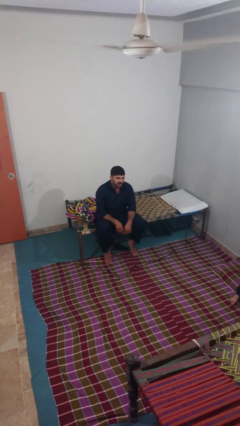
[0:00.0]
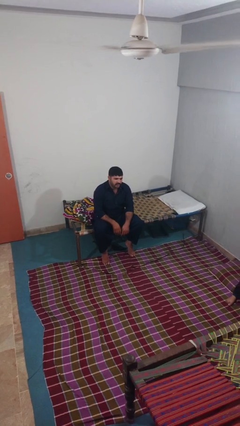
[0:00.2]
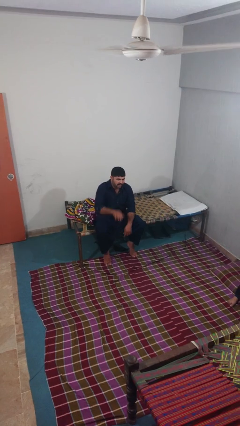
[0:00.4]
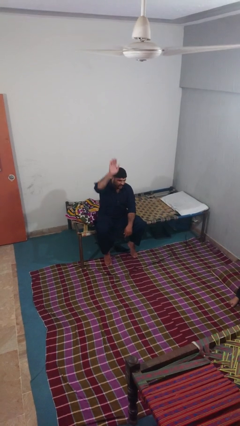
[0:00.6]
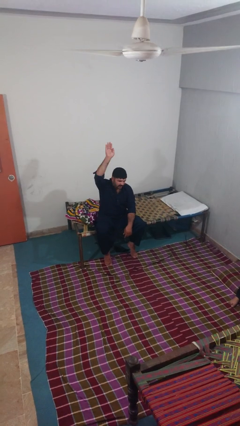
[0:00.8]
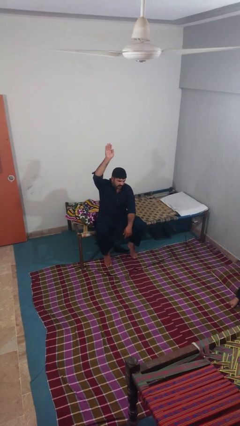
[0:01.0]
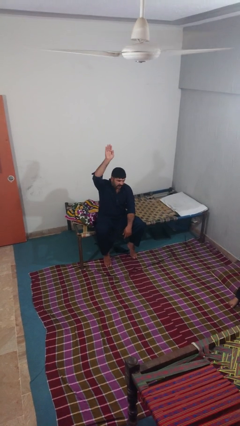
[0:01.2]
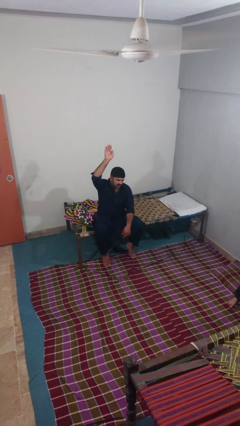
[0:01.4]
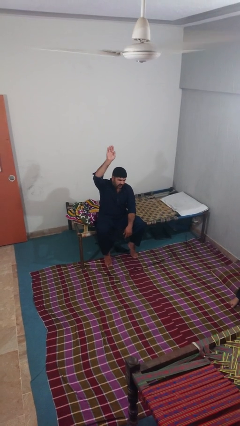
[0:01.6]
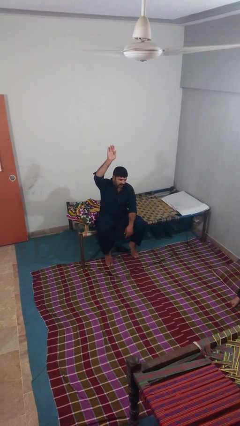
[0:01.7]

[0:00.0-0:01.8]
person gestures raise hand

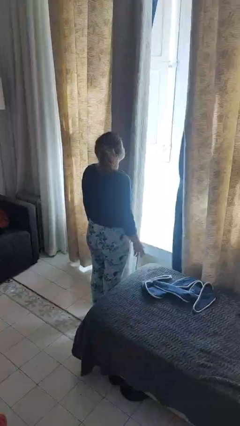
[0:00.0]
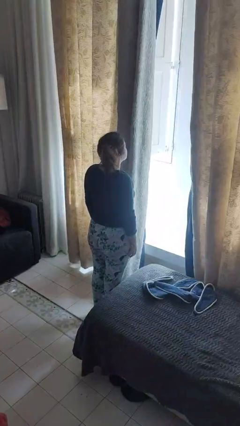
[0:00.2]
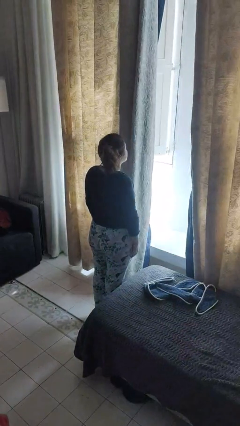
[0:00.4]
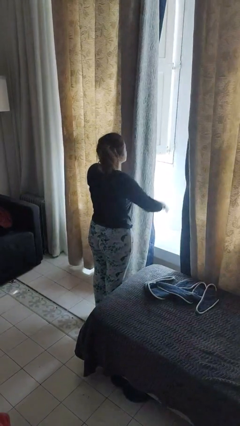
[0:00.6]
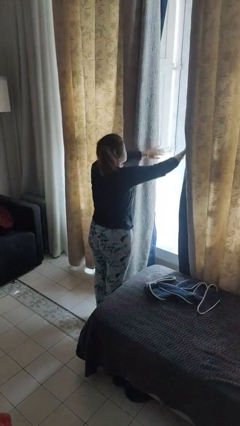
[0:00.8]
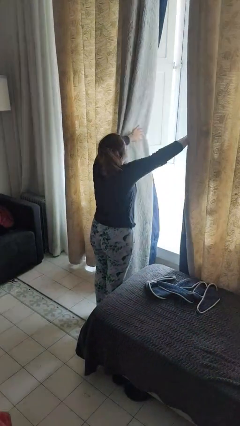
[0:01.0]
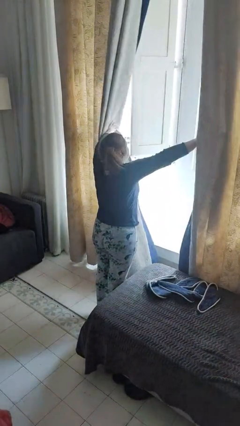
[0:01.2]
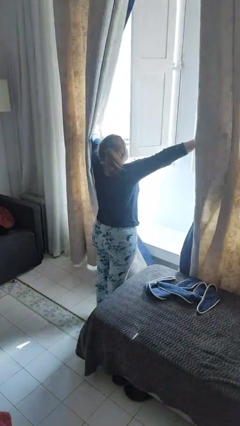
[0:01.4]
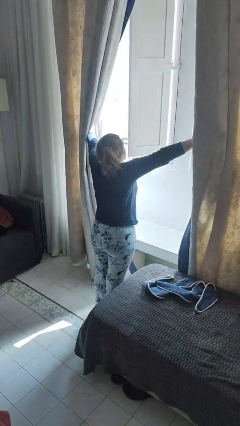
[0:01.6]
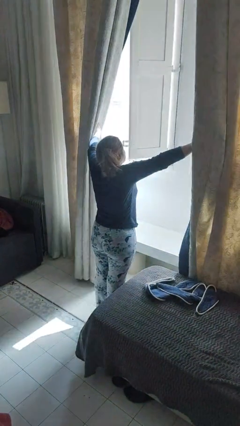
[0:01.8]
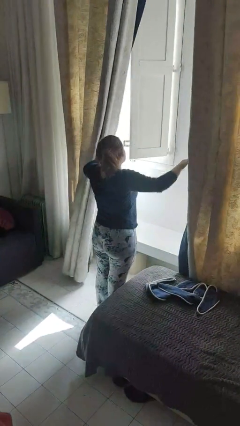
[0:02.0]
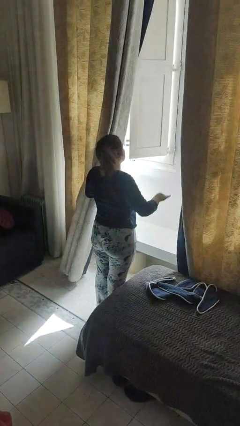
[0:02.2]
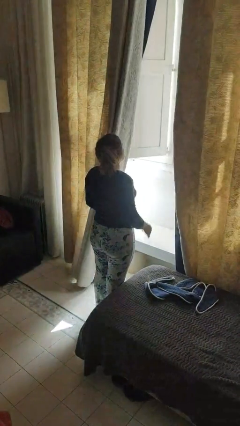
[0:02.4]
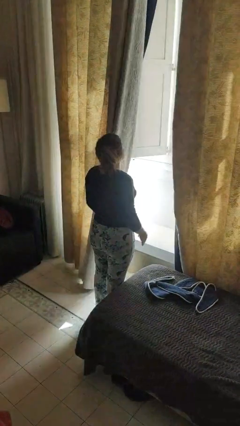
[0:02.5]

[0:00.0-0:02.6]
person opens curtains

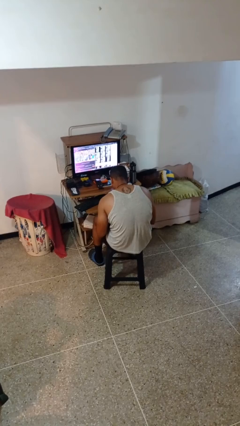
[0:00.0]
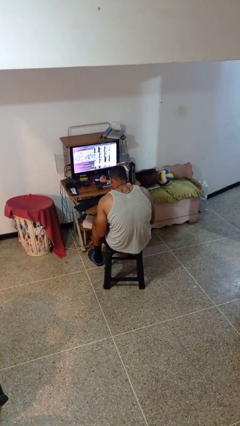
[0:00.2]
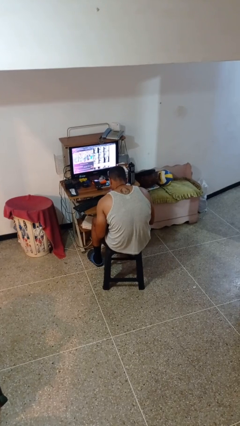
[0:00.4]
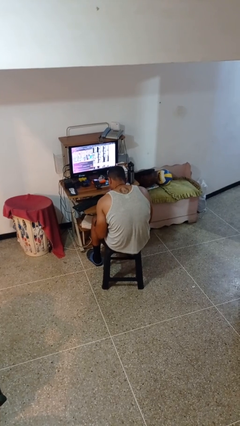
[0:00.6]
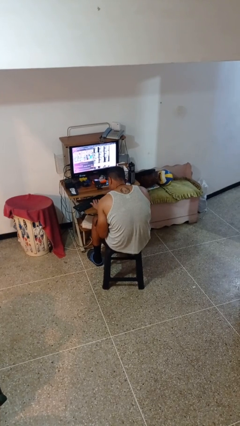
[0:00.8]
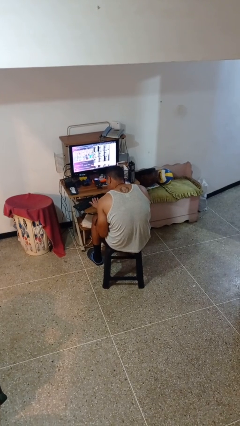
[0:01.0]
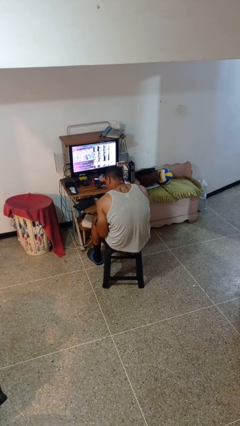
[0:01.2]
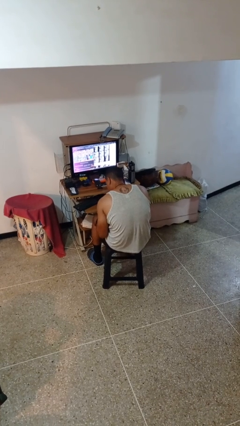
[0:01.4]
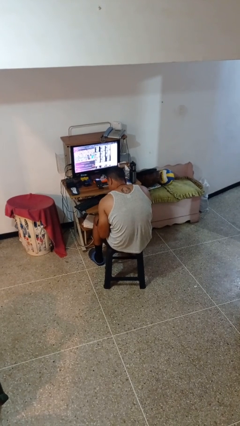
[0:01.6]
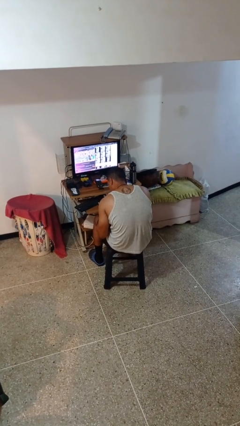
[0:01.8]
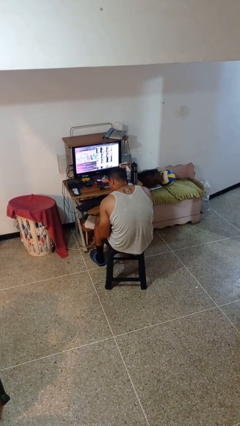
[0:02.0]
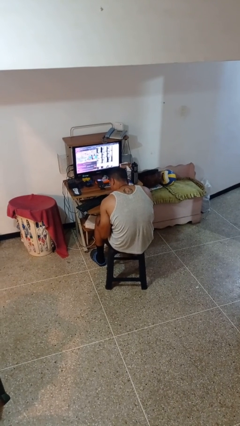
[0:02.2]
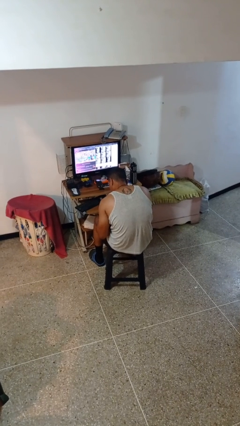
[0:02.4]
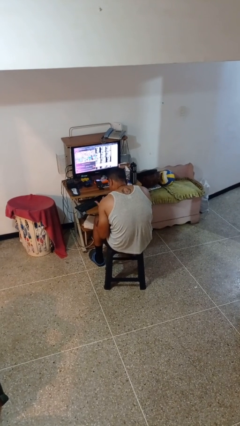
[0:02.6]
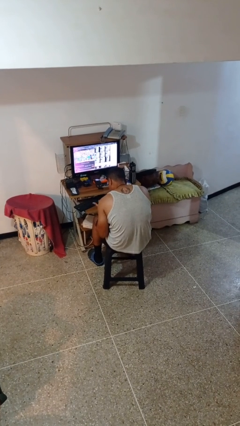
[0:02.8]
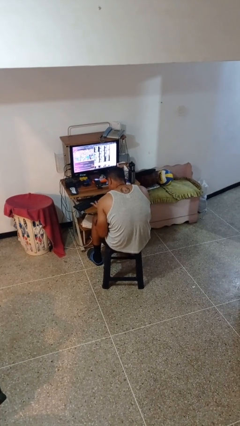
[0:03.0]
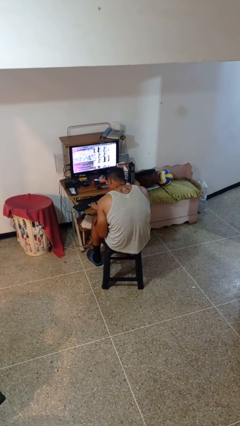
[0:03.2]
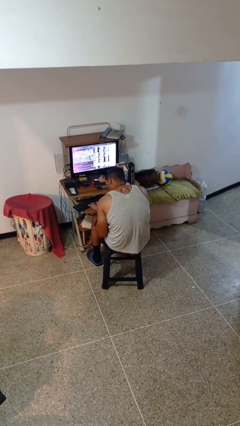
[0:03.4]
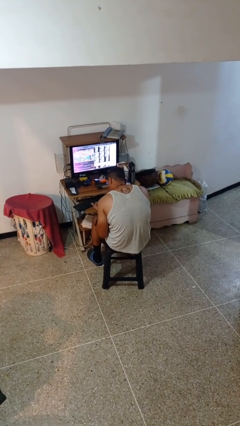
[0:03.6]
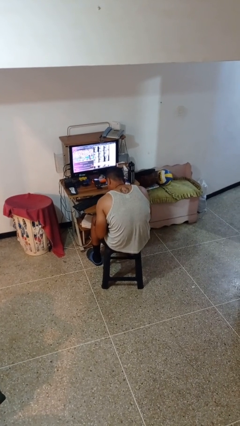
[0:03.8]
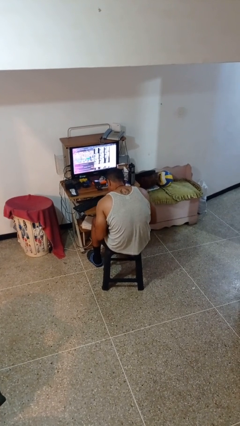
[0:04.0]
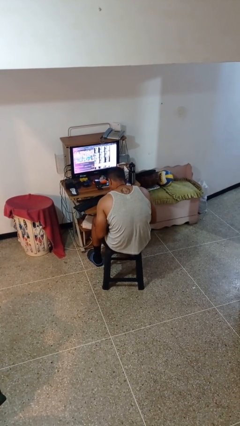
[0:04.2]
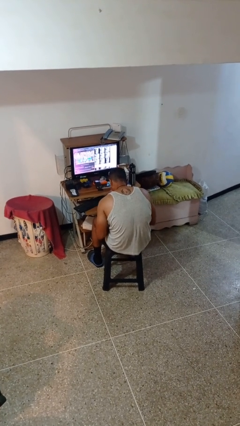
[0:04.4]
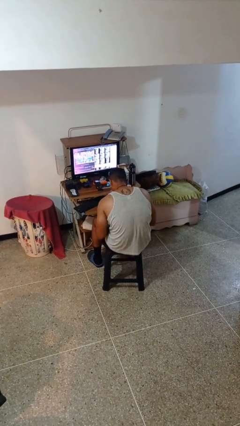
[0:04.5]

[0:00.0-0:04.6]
person looks at hands in lap

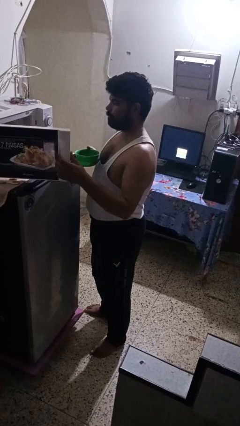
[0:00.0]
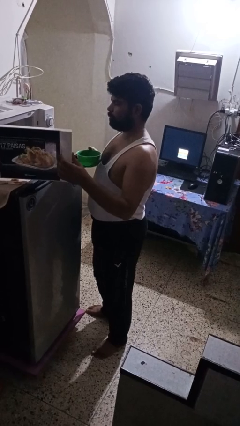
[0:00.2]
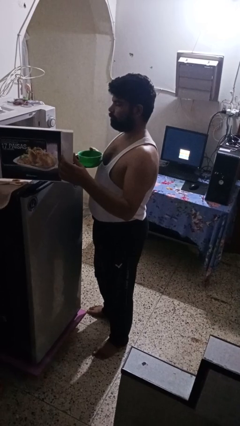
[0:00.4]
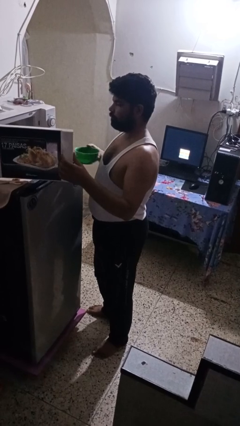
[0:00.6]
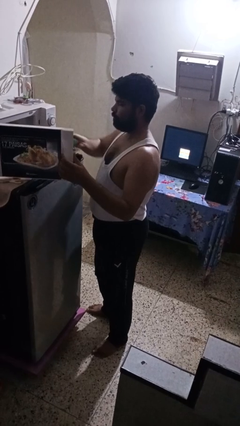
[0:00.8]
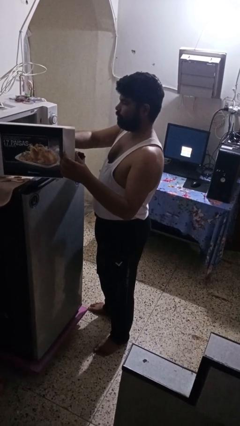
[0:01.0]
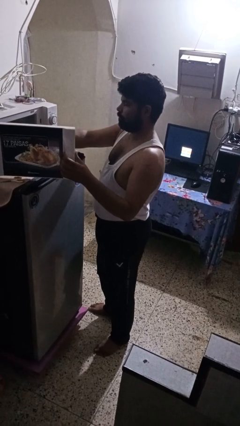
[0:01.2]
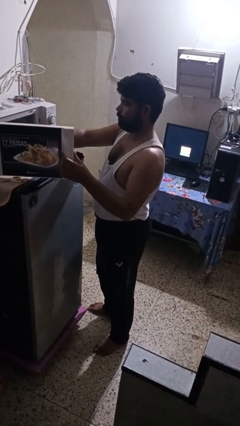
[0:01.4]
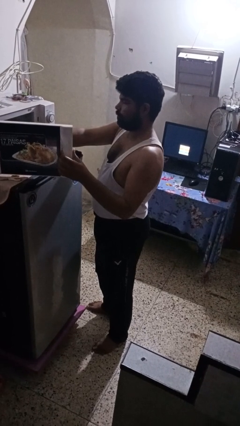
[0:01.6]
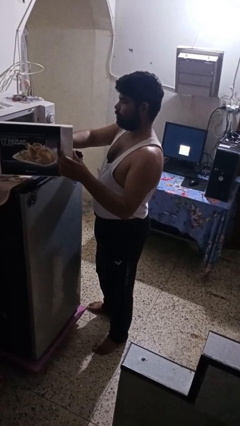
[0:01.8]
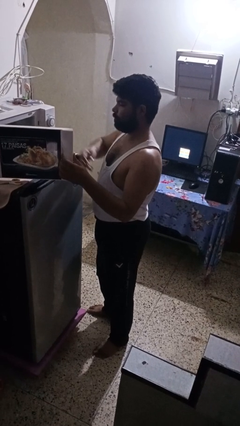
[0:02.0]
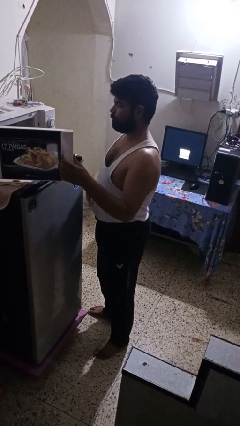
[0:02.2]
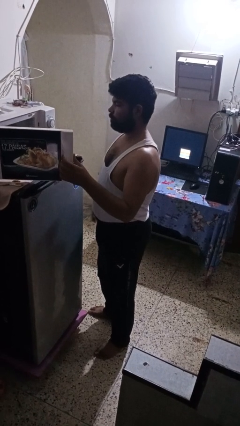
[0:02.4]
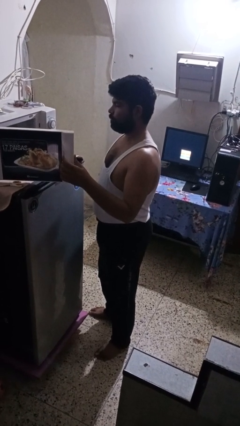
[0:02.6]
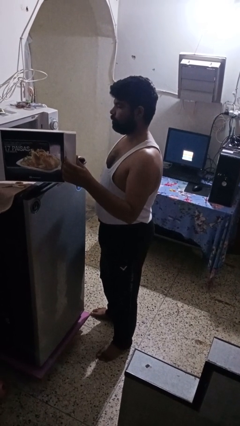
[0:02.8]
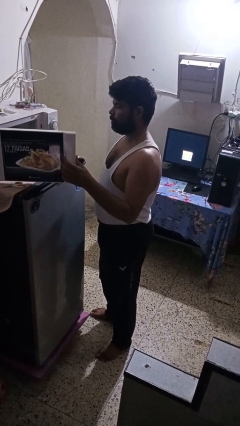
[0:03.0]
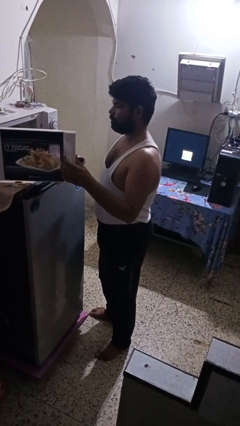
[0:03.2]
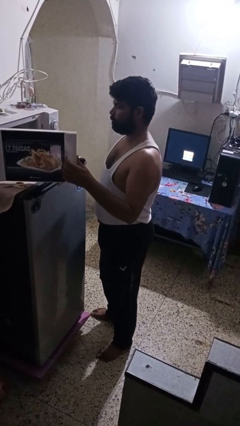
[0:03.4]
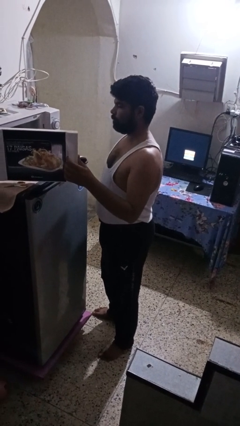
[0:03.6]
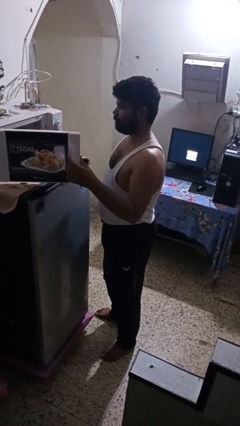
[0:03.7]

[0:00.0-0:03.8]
person puts object into microwave

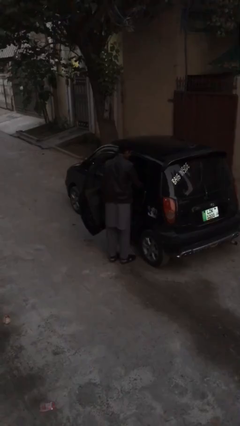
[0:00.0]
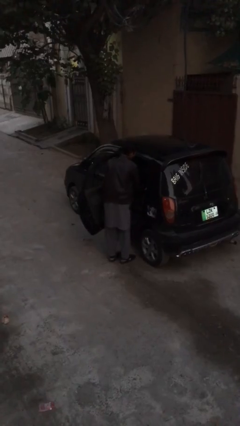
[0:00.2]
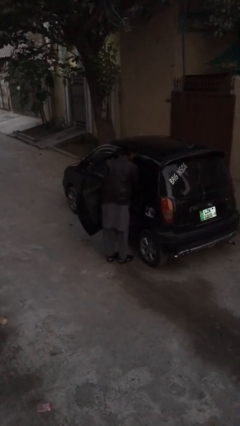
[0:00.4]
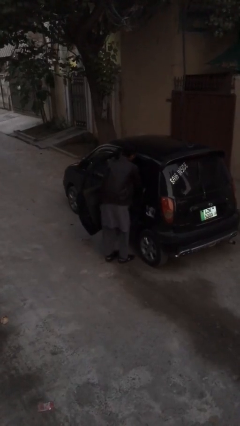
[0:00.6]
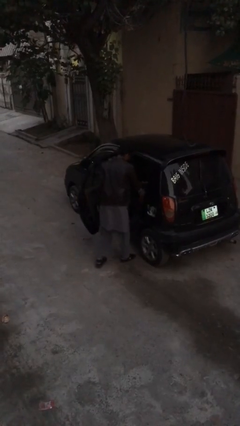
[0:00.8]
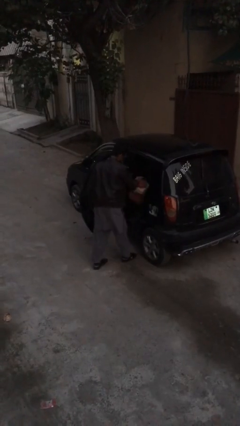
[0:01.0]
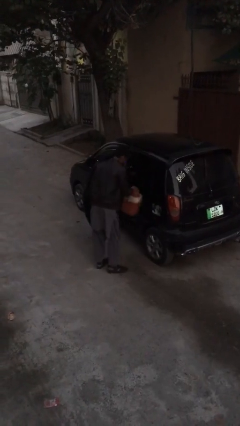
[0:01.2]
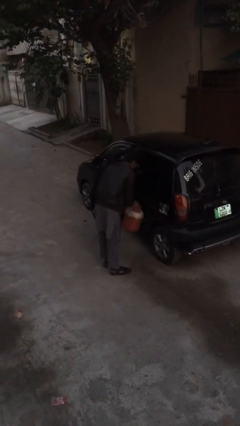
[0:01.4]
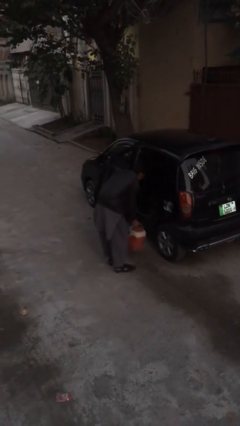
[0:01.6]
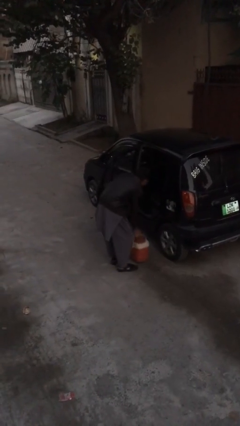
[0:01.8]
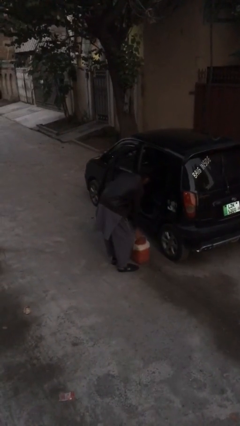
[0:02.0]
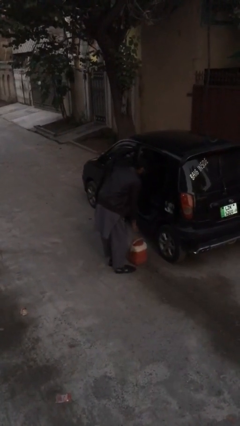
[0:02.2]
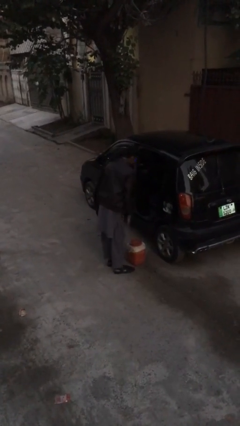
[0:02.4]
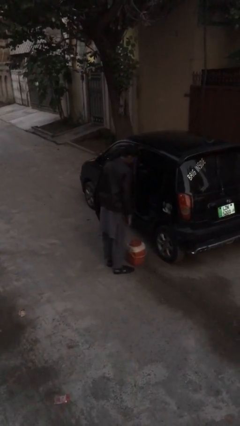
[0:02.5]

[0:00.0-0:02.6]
person unloads car

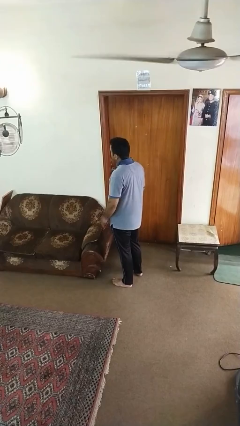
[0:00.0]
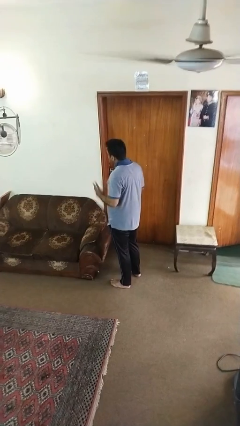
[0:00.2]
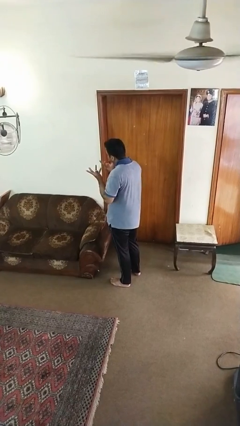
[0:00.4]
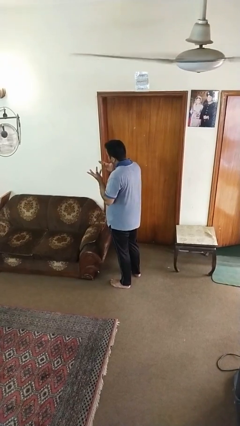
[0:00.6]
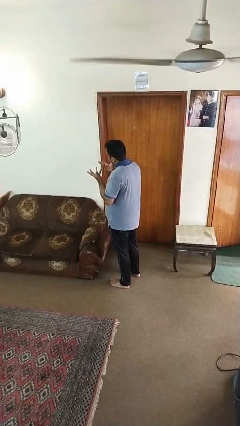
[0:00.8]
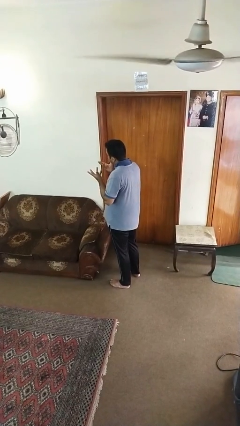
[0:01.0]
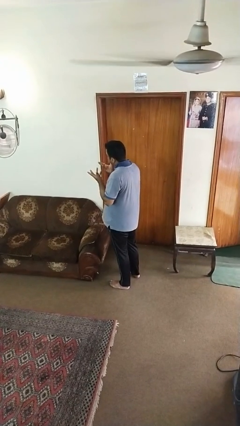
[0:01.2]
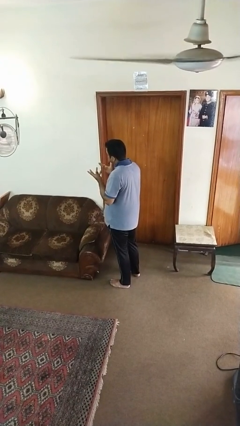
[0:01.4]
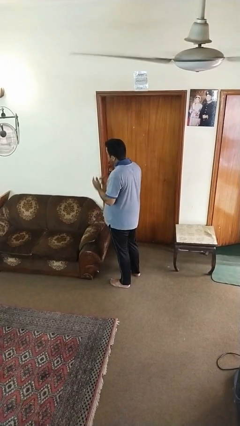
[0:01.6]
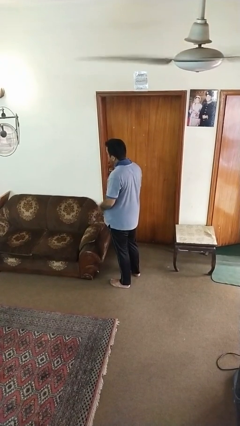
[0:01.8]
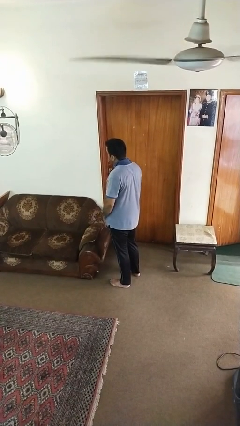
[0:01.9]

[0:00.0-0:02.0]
person shrugs

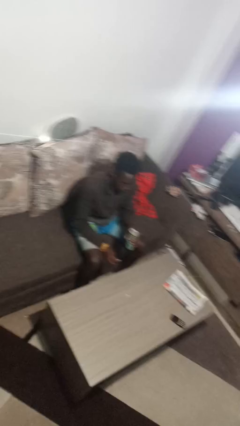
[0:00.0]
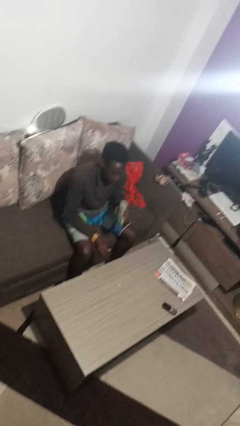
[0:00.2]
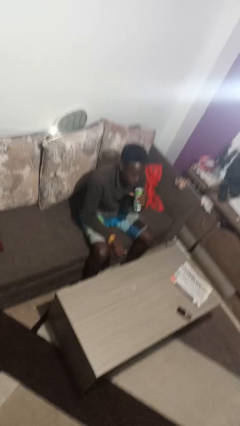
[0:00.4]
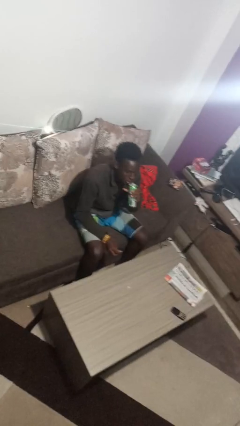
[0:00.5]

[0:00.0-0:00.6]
person drinks from beverage can
